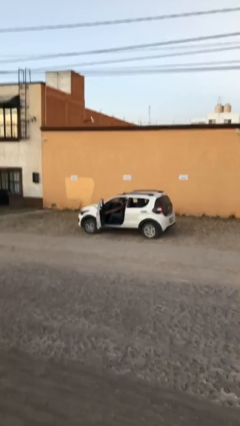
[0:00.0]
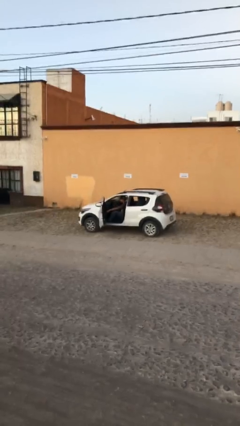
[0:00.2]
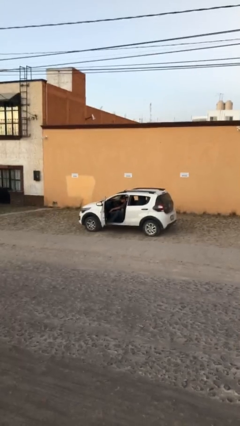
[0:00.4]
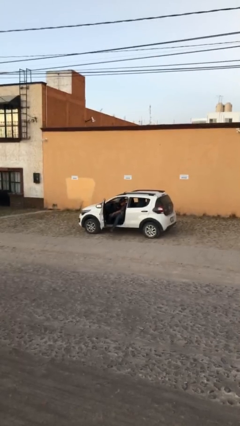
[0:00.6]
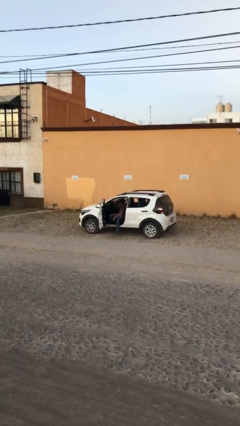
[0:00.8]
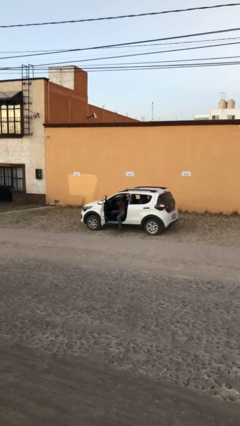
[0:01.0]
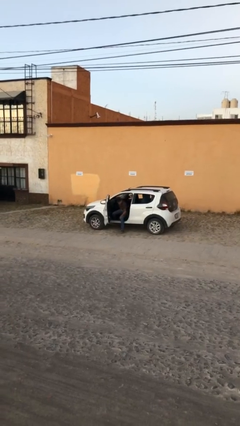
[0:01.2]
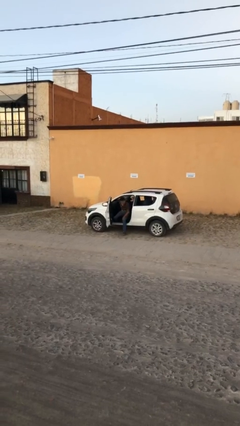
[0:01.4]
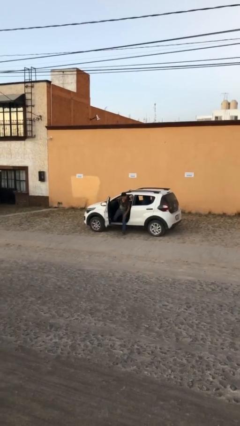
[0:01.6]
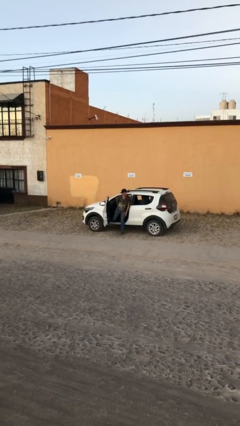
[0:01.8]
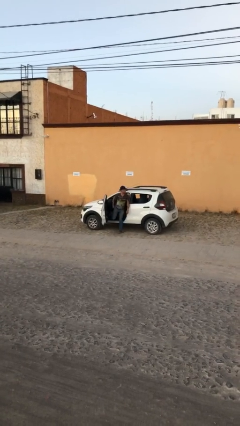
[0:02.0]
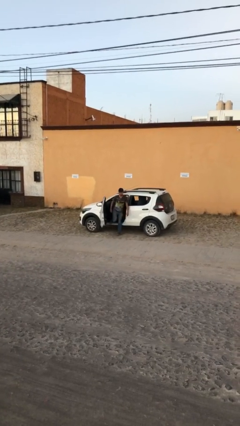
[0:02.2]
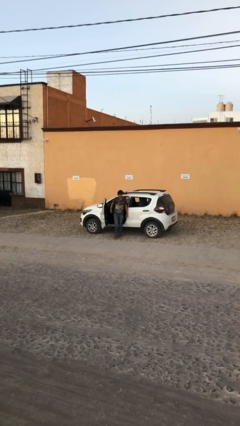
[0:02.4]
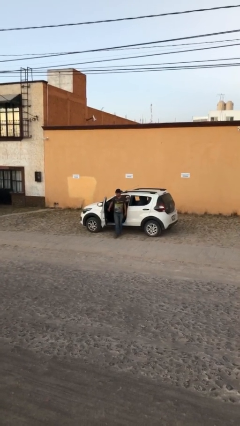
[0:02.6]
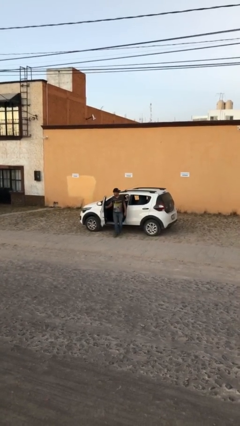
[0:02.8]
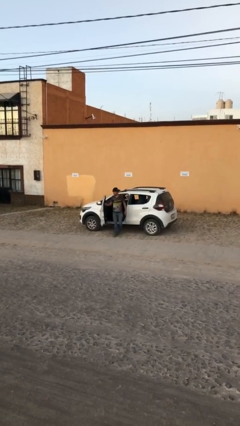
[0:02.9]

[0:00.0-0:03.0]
person exits car

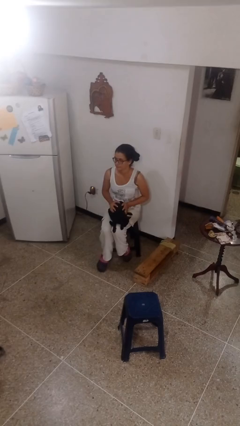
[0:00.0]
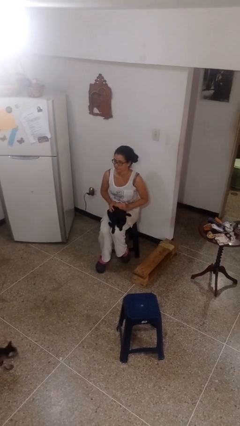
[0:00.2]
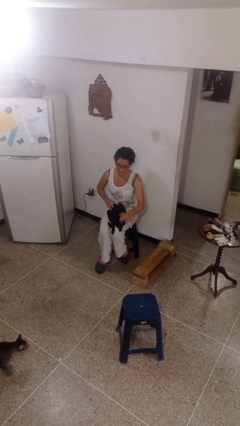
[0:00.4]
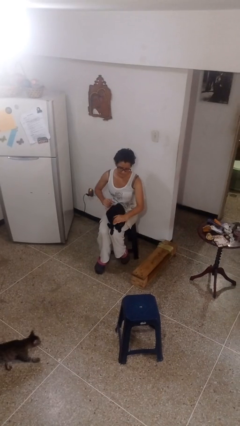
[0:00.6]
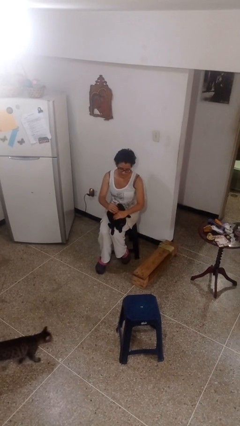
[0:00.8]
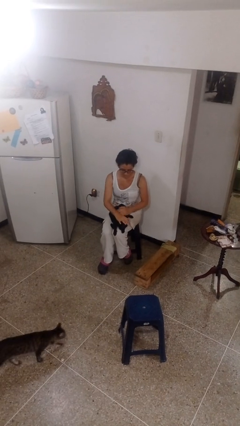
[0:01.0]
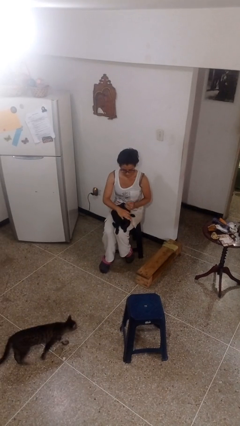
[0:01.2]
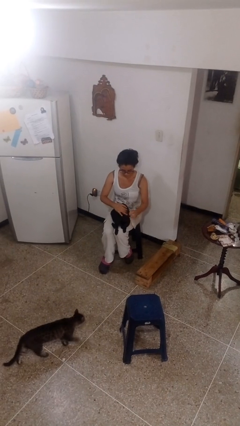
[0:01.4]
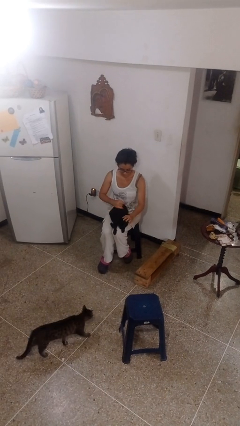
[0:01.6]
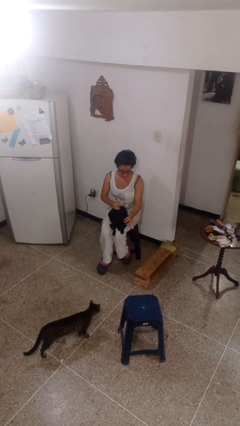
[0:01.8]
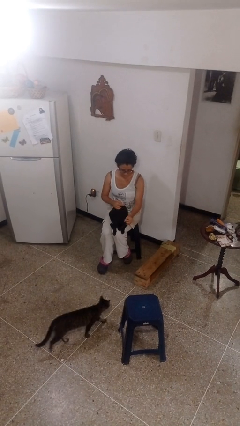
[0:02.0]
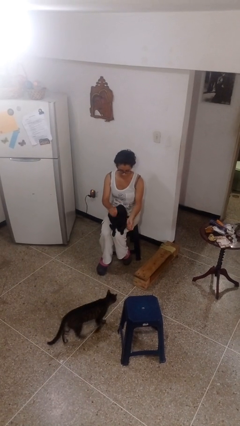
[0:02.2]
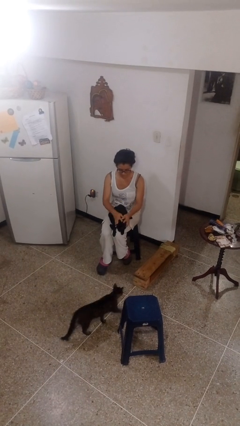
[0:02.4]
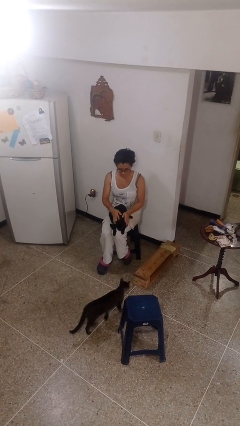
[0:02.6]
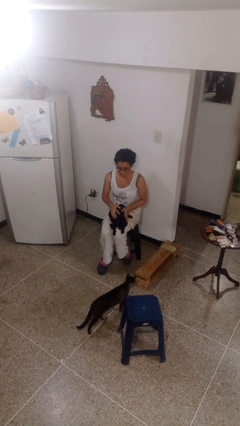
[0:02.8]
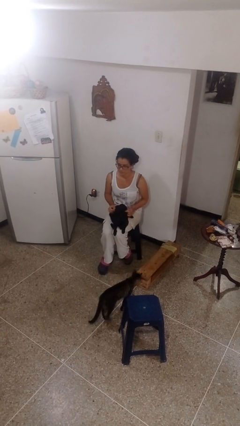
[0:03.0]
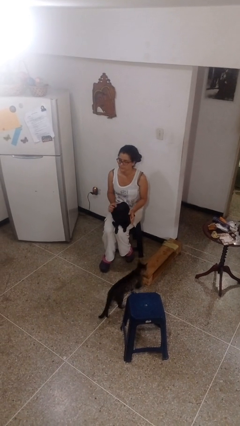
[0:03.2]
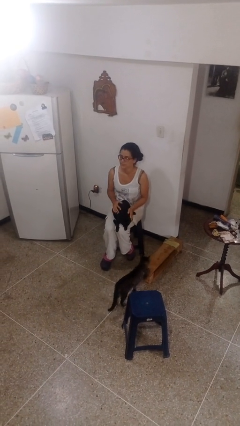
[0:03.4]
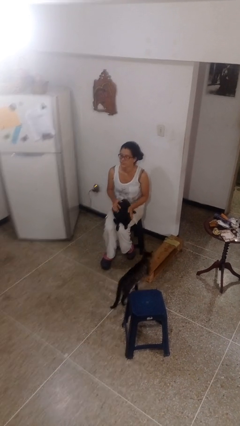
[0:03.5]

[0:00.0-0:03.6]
person pets cat

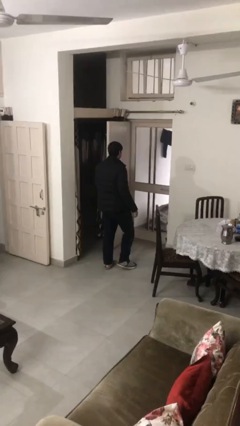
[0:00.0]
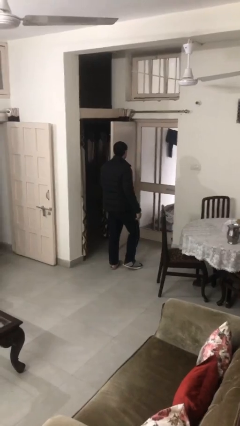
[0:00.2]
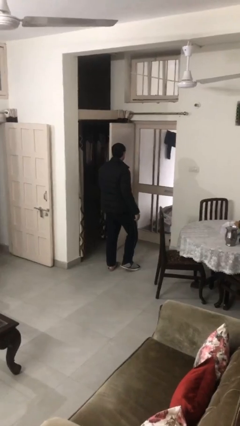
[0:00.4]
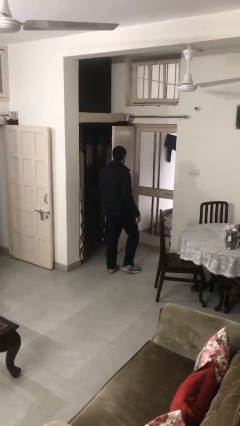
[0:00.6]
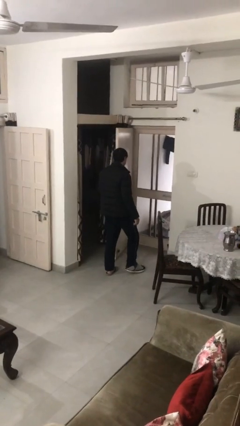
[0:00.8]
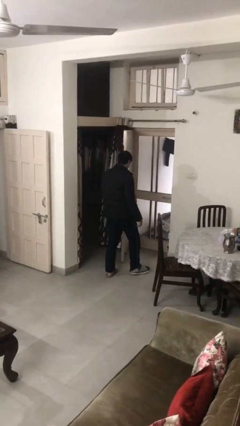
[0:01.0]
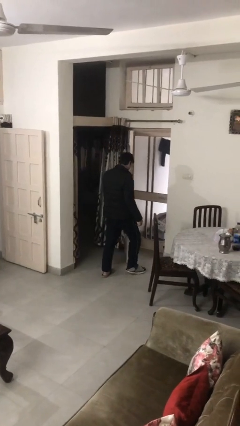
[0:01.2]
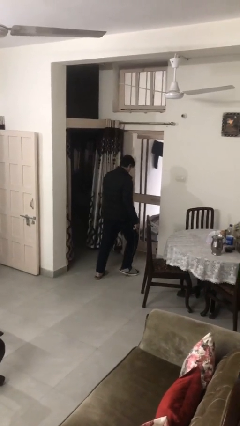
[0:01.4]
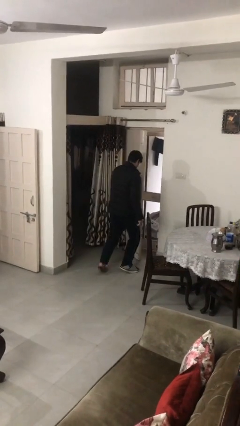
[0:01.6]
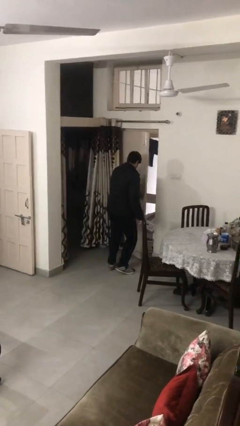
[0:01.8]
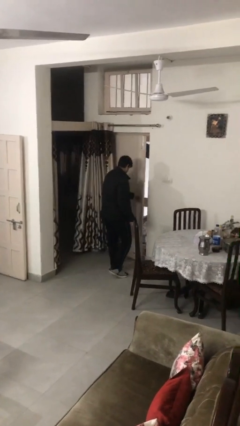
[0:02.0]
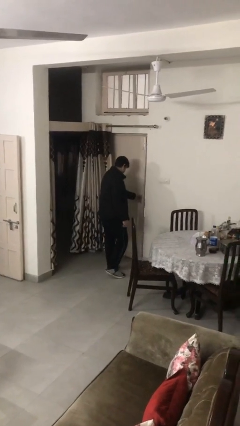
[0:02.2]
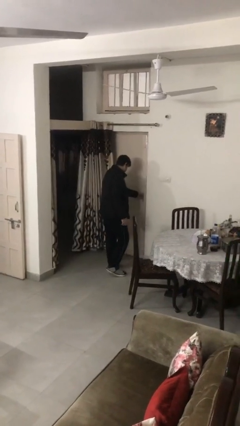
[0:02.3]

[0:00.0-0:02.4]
person closes facility door

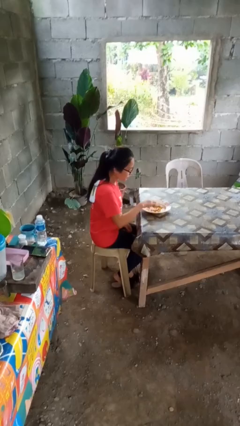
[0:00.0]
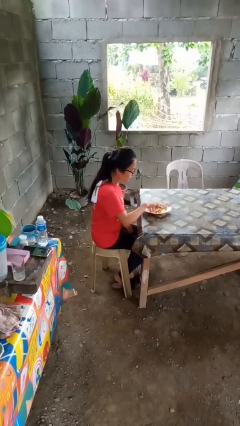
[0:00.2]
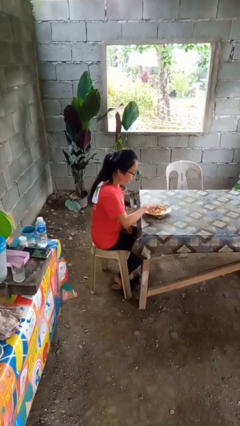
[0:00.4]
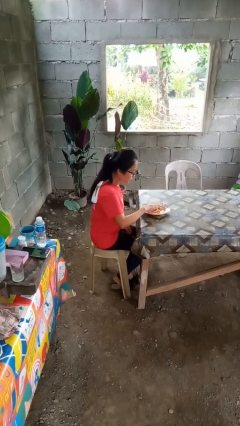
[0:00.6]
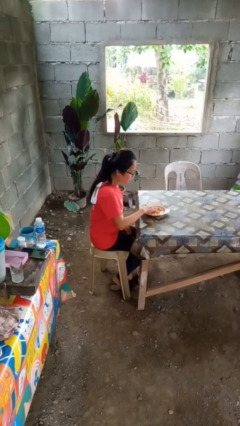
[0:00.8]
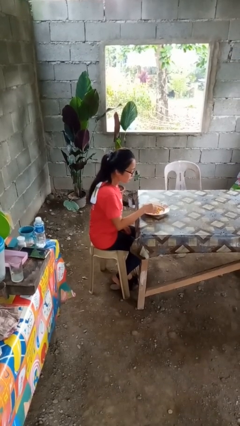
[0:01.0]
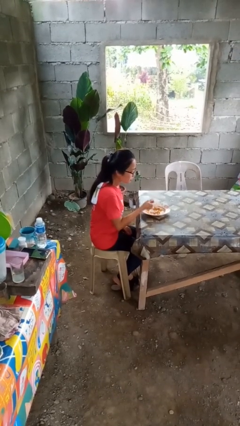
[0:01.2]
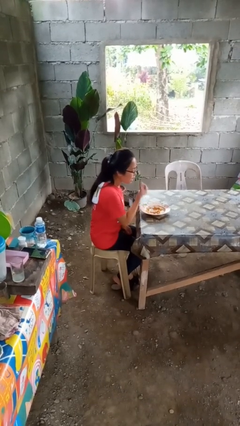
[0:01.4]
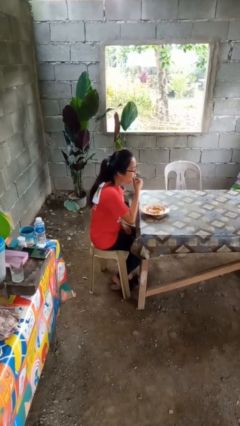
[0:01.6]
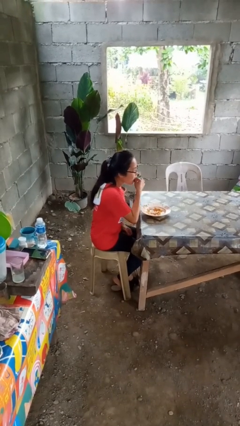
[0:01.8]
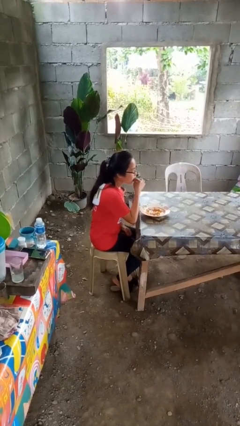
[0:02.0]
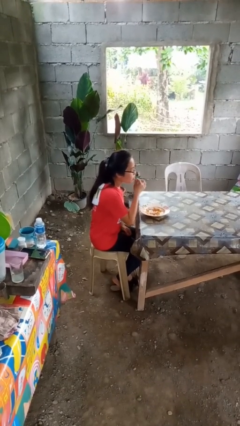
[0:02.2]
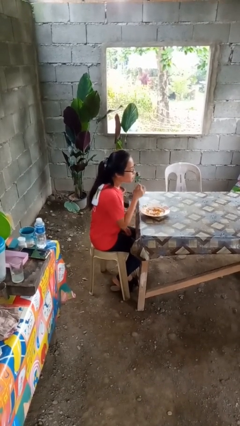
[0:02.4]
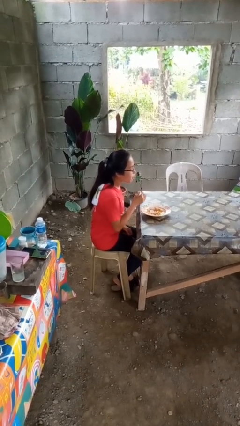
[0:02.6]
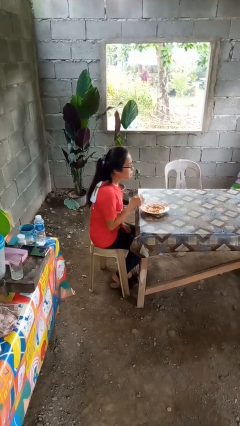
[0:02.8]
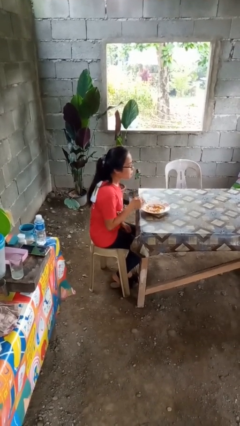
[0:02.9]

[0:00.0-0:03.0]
person eats with hands

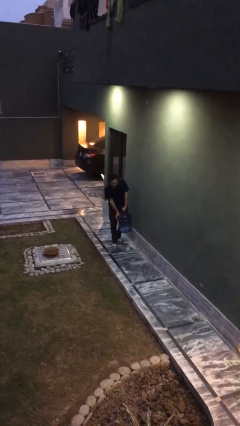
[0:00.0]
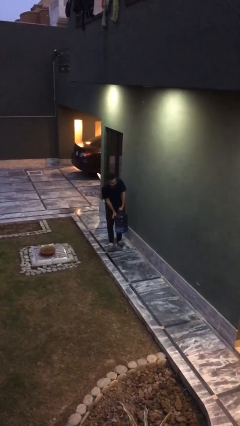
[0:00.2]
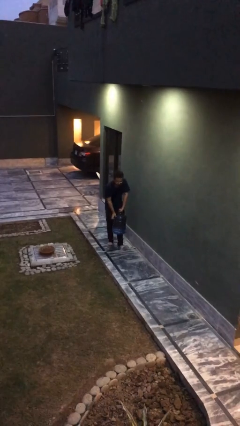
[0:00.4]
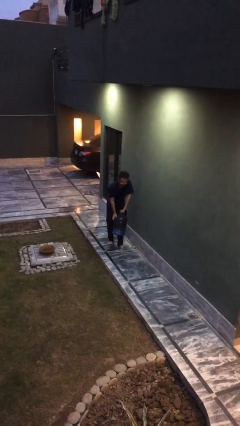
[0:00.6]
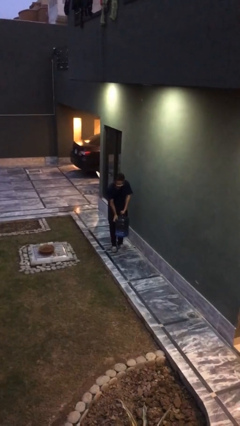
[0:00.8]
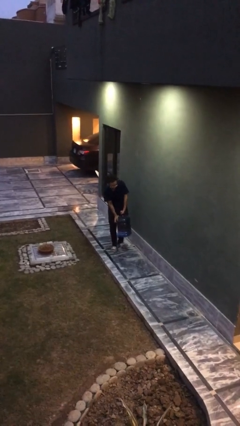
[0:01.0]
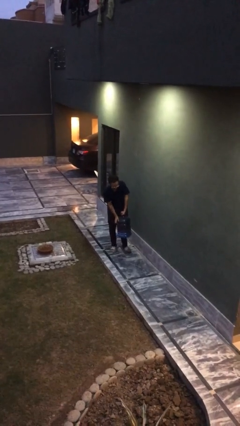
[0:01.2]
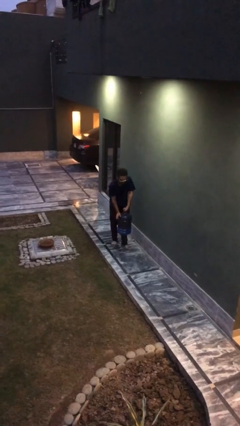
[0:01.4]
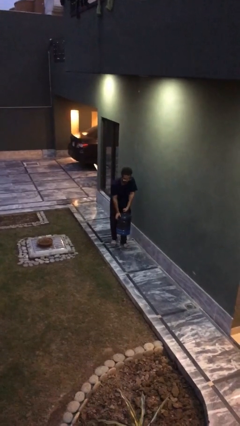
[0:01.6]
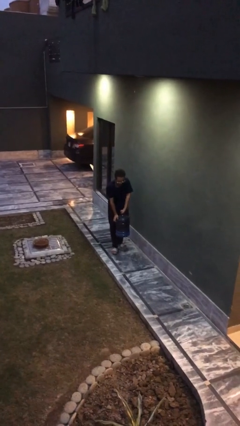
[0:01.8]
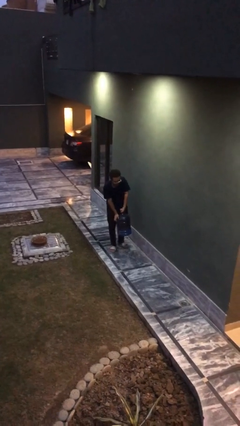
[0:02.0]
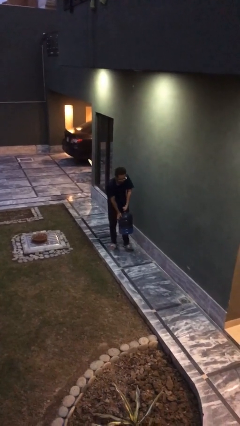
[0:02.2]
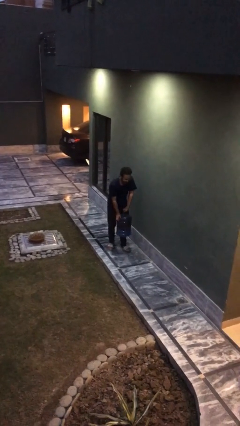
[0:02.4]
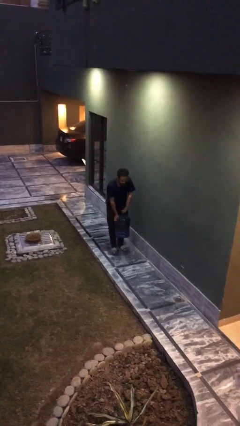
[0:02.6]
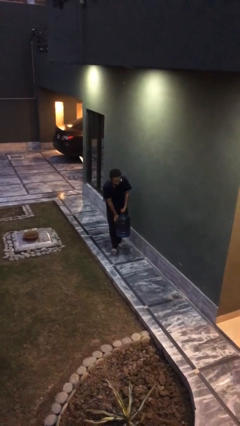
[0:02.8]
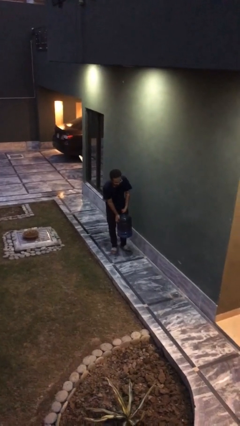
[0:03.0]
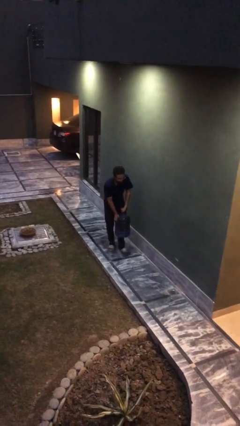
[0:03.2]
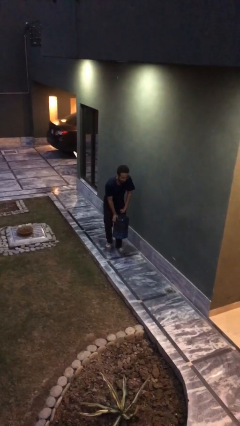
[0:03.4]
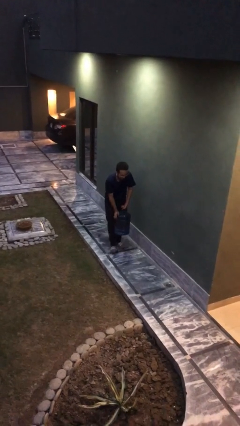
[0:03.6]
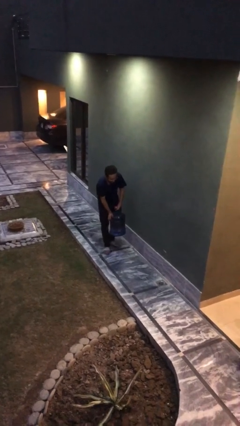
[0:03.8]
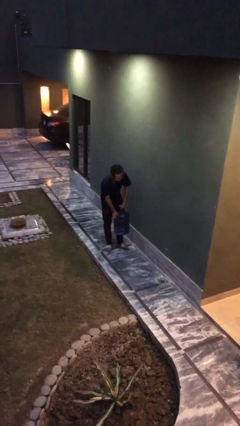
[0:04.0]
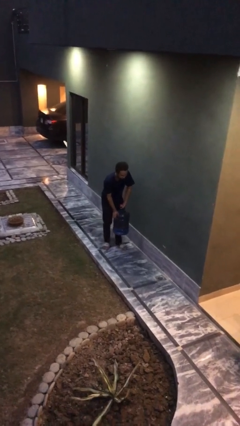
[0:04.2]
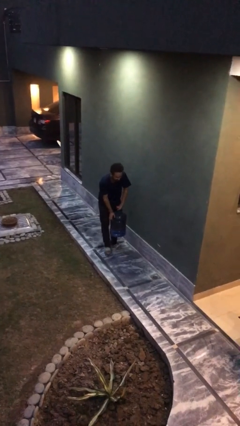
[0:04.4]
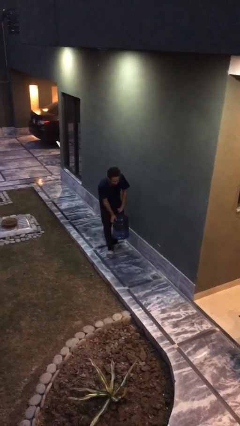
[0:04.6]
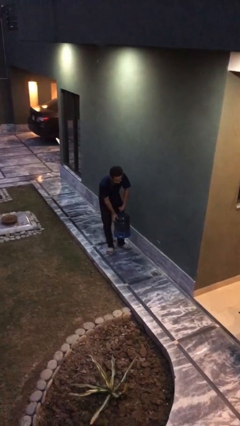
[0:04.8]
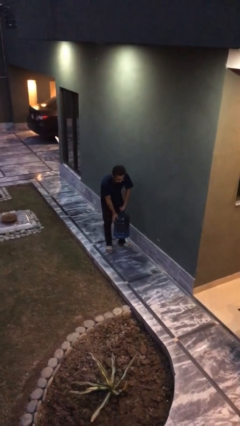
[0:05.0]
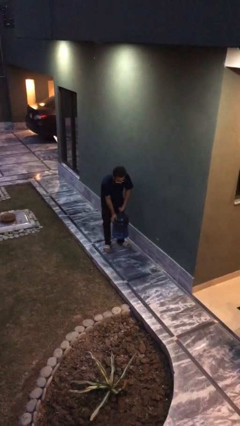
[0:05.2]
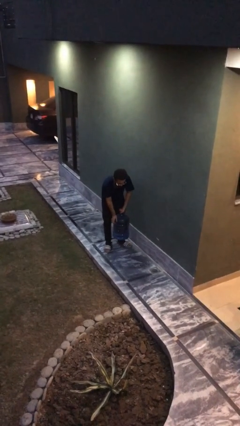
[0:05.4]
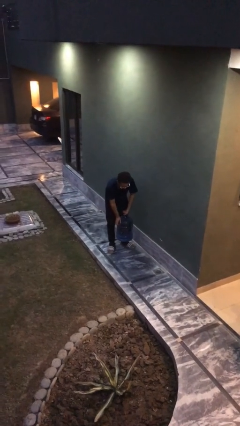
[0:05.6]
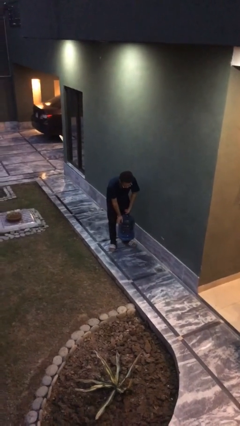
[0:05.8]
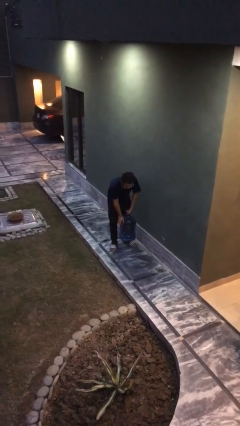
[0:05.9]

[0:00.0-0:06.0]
person carries heavy object
